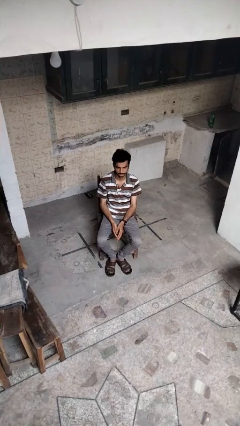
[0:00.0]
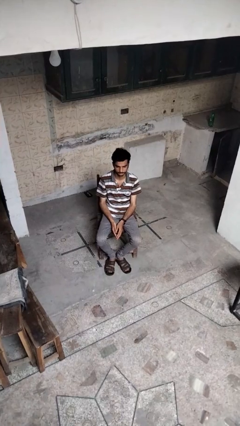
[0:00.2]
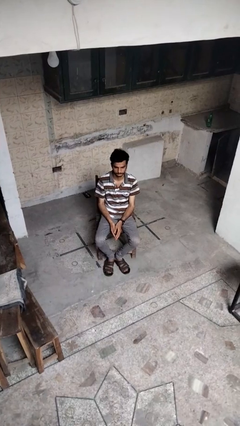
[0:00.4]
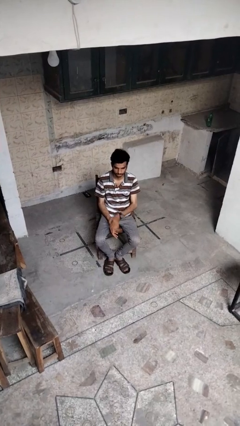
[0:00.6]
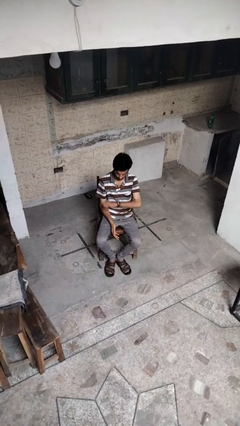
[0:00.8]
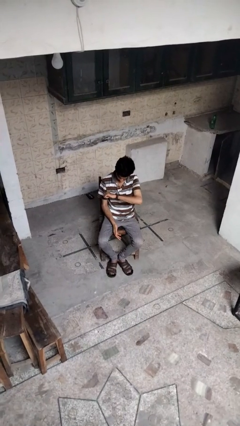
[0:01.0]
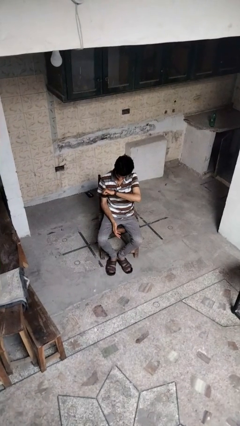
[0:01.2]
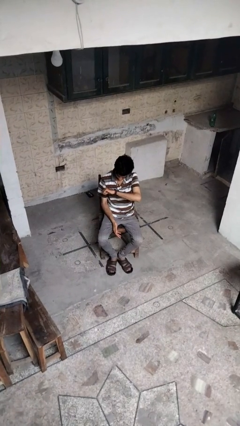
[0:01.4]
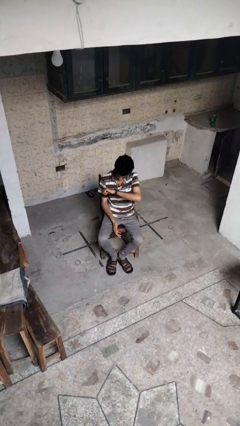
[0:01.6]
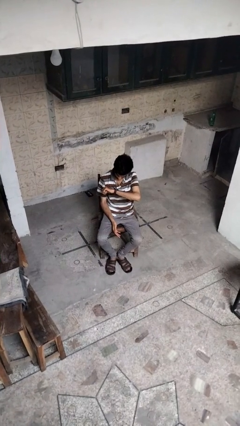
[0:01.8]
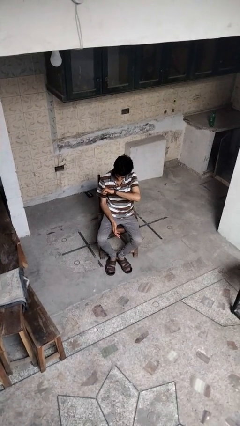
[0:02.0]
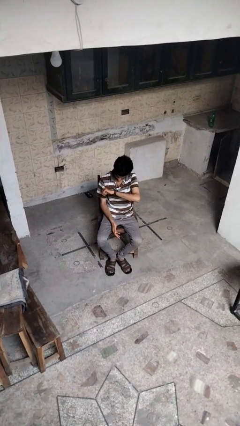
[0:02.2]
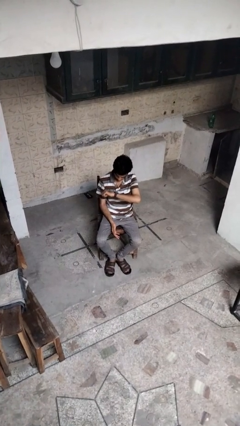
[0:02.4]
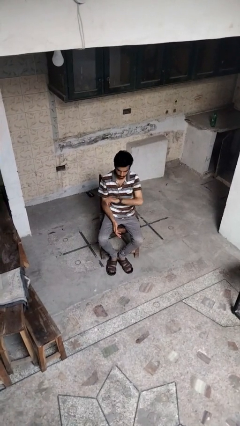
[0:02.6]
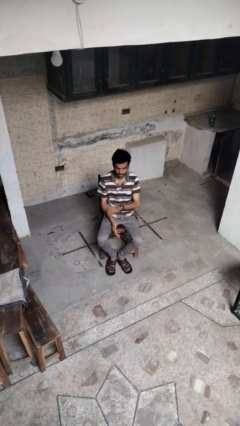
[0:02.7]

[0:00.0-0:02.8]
person looks at wristwatch

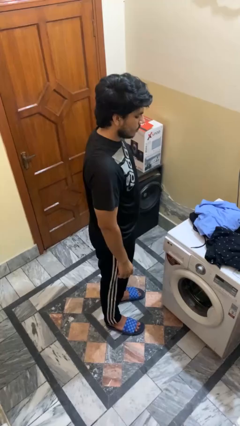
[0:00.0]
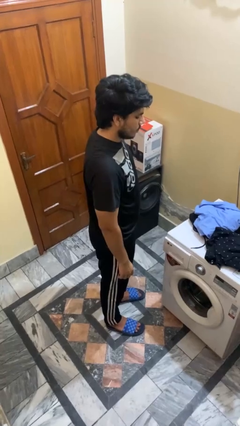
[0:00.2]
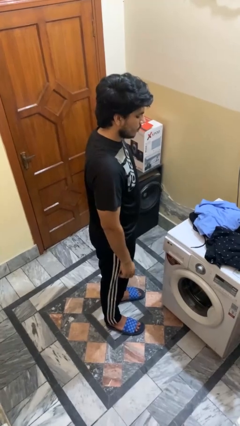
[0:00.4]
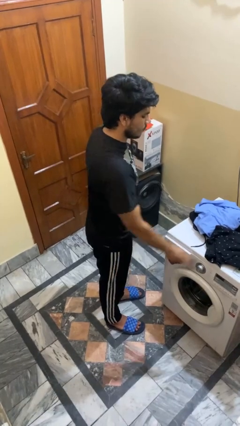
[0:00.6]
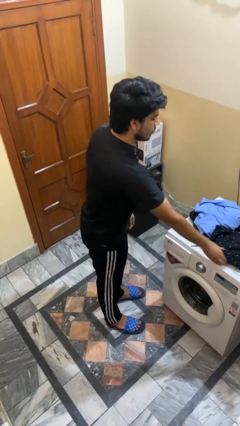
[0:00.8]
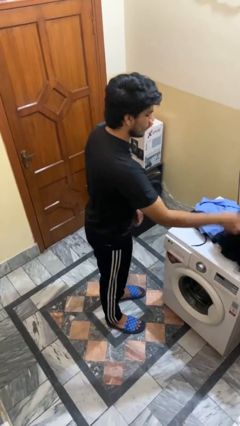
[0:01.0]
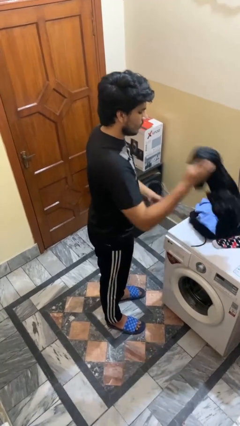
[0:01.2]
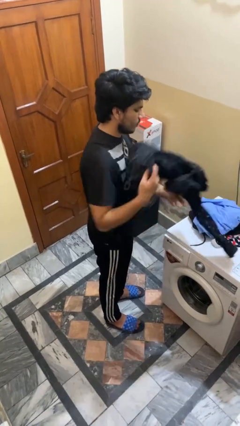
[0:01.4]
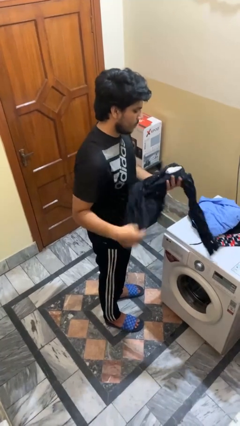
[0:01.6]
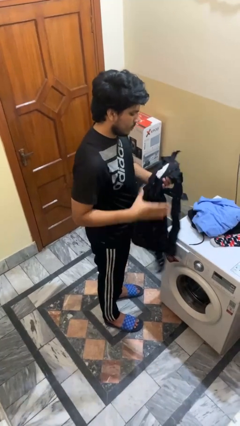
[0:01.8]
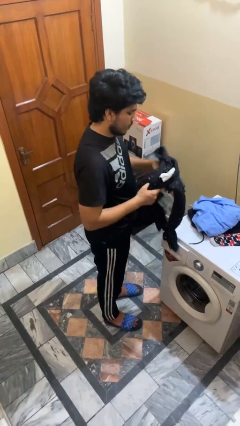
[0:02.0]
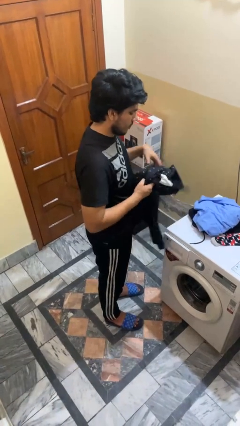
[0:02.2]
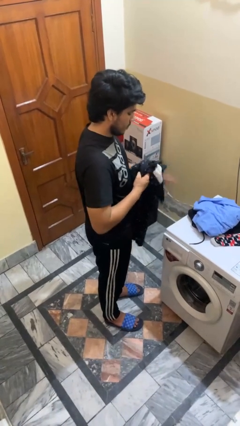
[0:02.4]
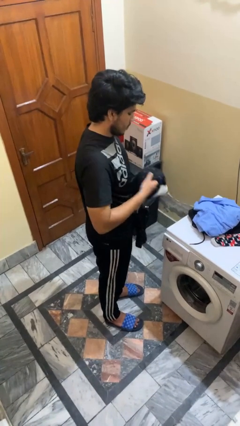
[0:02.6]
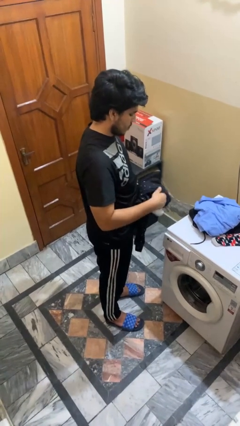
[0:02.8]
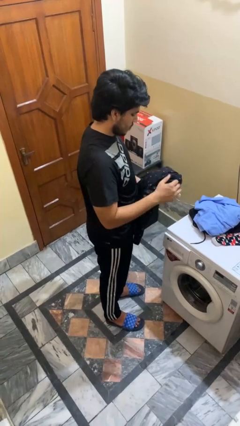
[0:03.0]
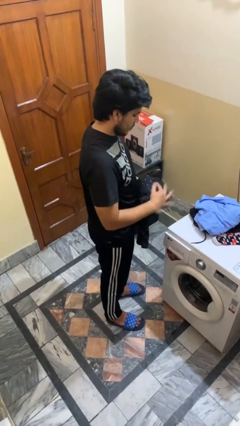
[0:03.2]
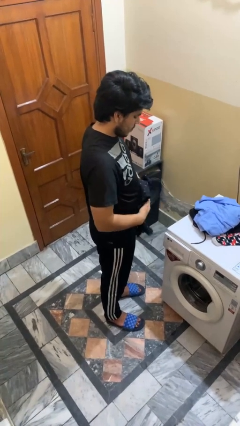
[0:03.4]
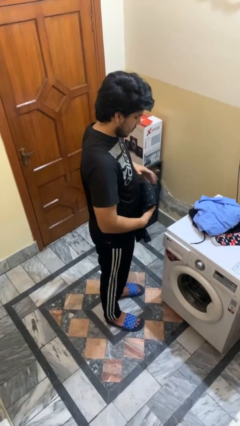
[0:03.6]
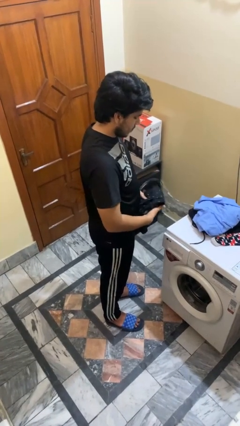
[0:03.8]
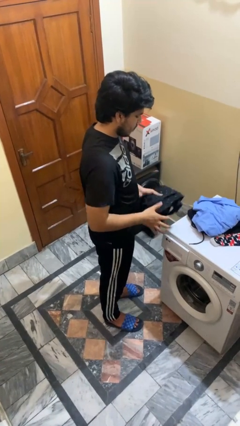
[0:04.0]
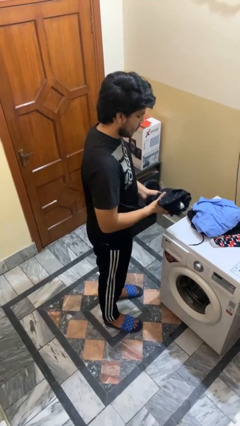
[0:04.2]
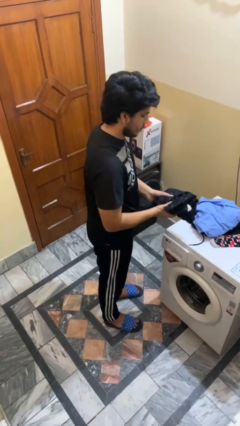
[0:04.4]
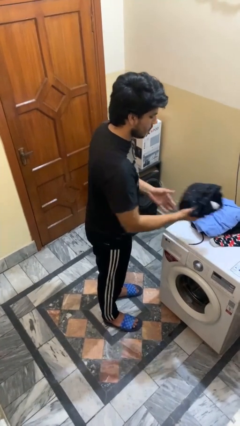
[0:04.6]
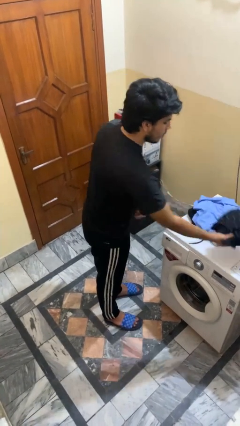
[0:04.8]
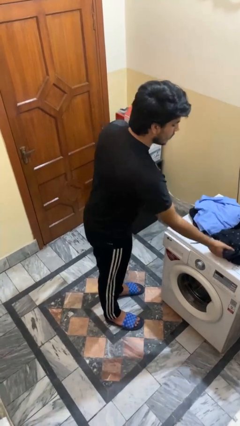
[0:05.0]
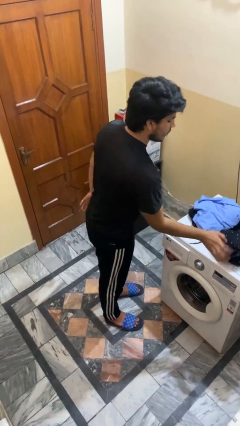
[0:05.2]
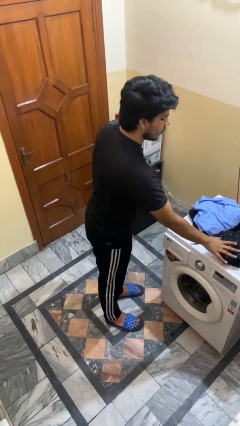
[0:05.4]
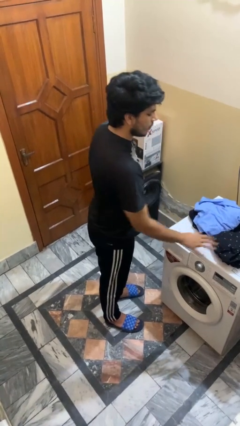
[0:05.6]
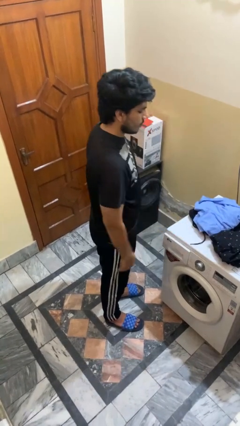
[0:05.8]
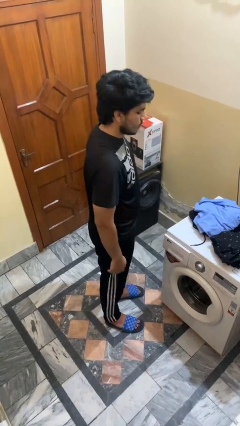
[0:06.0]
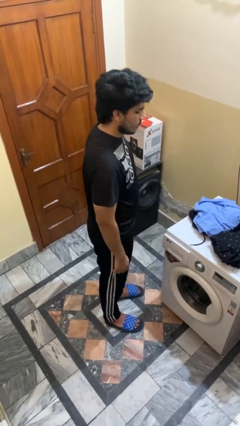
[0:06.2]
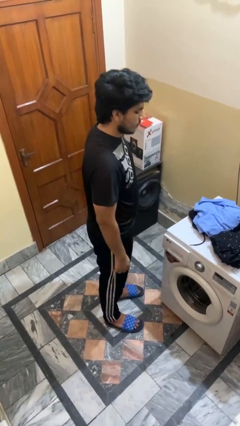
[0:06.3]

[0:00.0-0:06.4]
person folds shirt

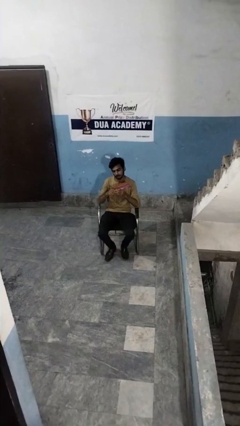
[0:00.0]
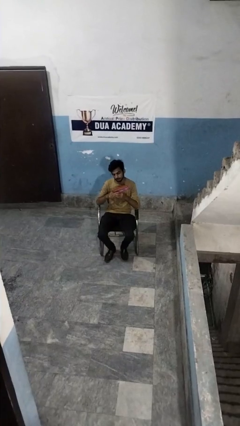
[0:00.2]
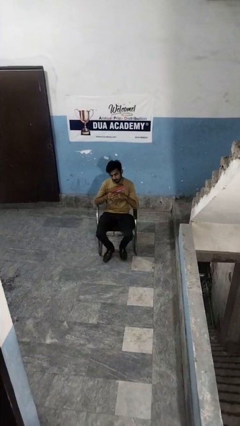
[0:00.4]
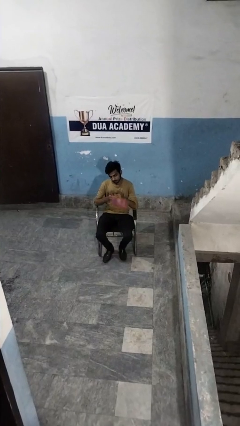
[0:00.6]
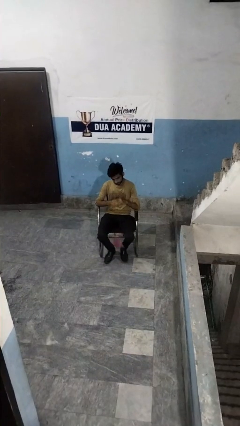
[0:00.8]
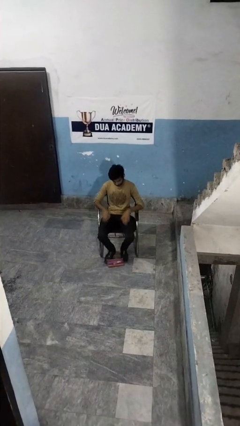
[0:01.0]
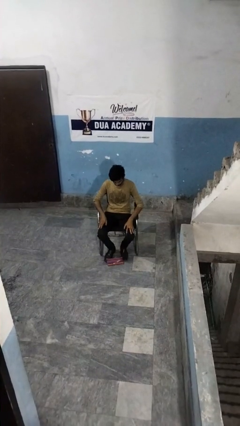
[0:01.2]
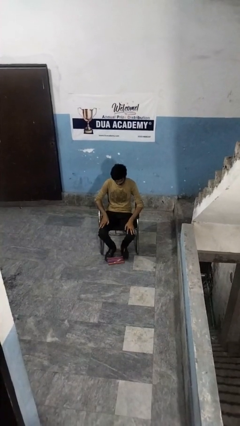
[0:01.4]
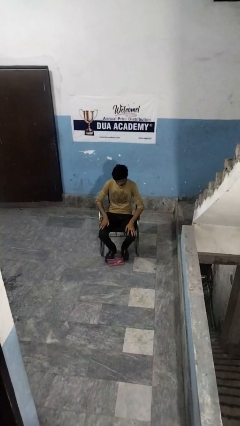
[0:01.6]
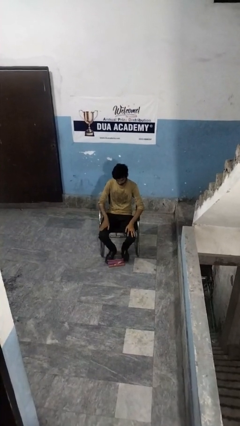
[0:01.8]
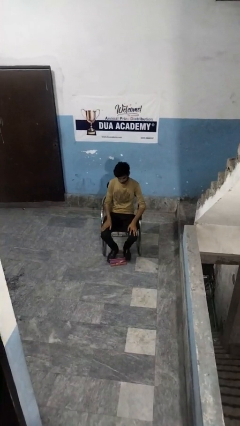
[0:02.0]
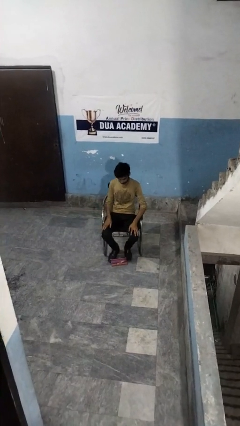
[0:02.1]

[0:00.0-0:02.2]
person drops object

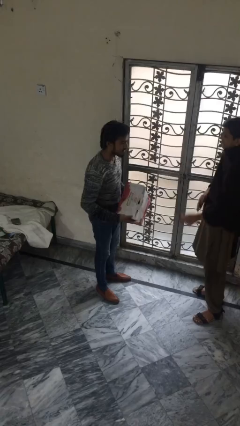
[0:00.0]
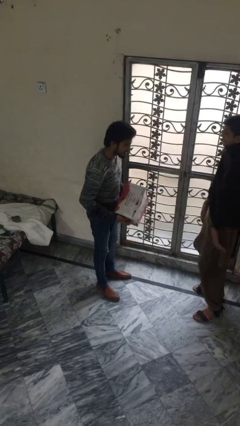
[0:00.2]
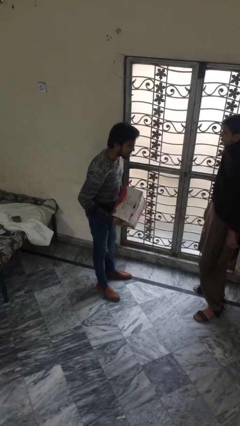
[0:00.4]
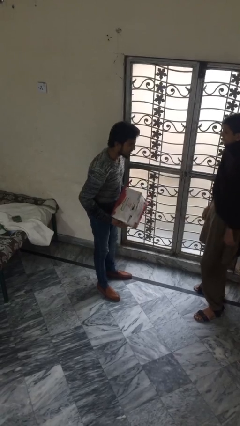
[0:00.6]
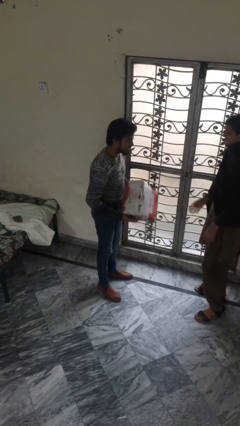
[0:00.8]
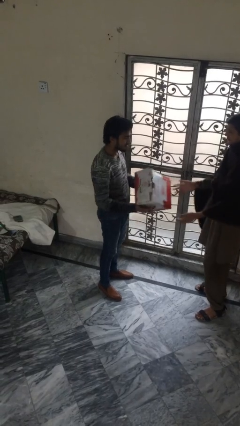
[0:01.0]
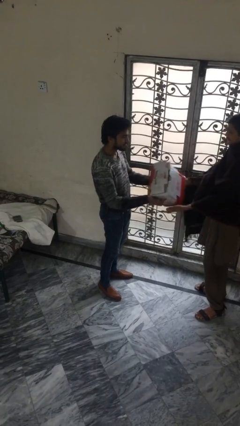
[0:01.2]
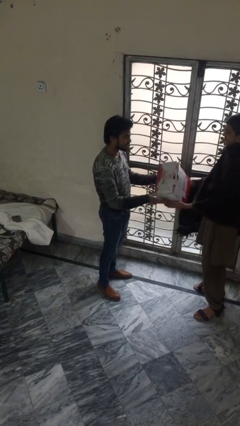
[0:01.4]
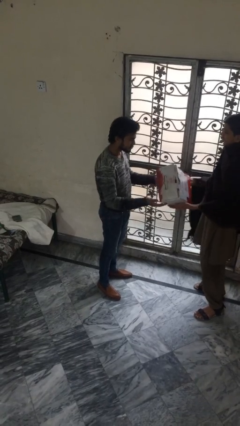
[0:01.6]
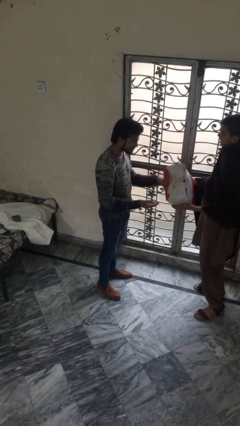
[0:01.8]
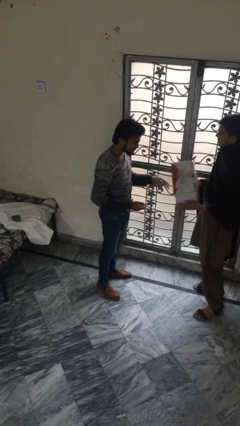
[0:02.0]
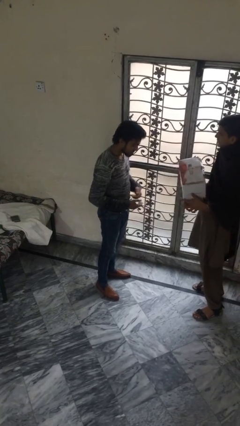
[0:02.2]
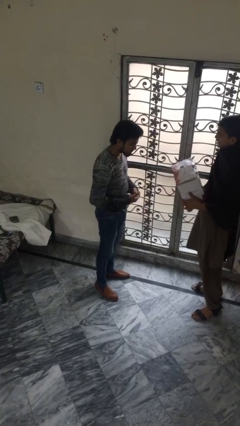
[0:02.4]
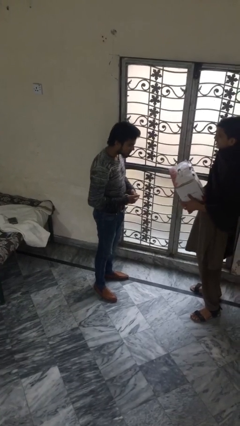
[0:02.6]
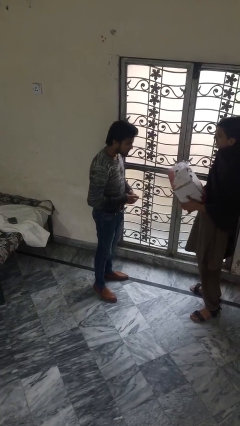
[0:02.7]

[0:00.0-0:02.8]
person transfers object to person

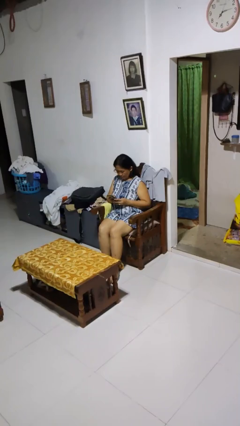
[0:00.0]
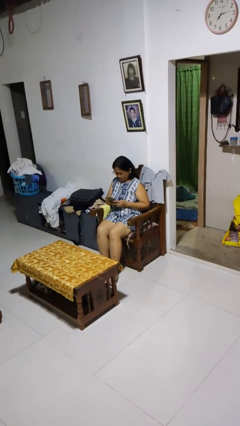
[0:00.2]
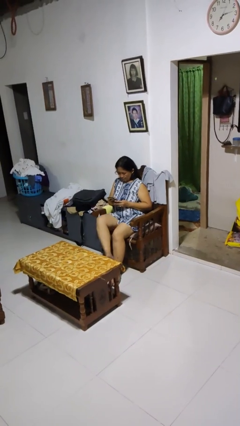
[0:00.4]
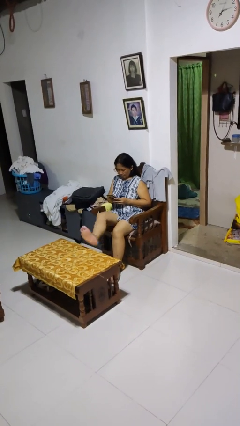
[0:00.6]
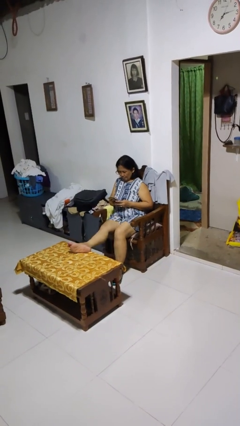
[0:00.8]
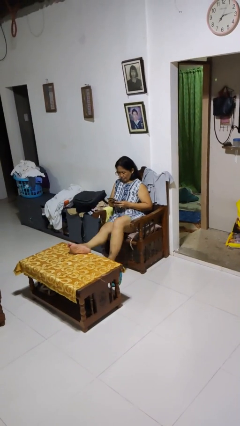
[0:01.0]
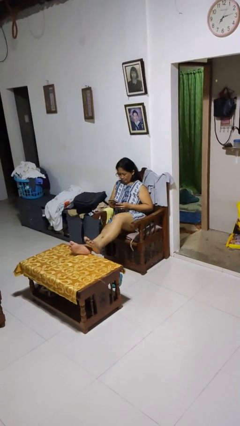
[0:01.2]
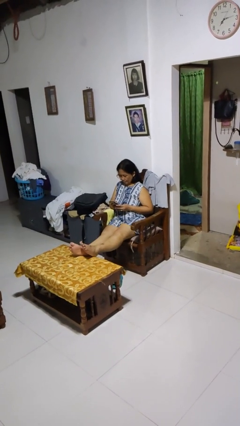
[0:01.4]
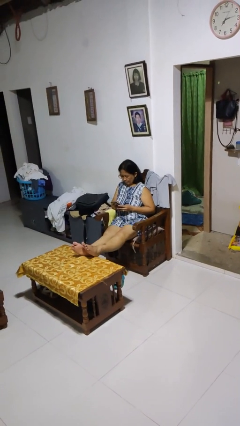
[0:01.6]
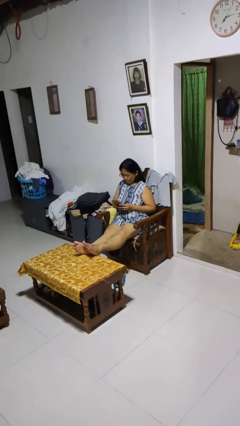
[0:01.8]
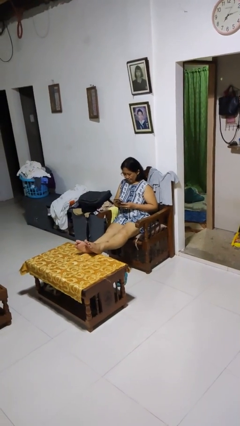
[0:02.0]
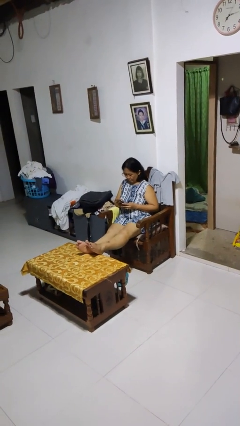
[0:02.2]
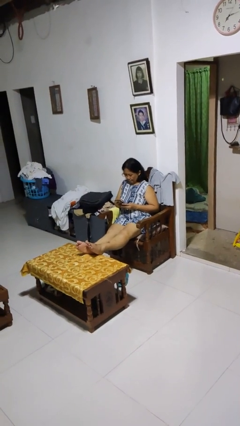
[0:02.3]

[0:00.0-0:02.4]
person puts feet up

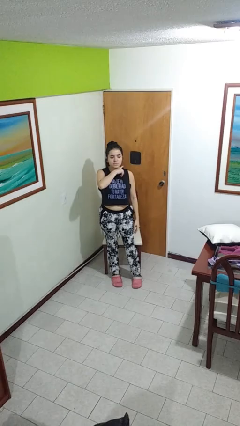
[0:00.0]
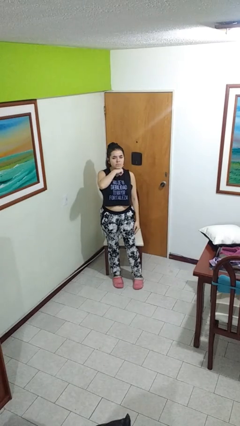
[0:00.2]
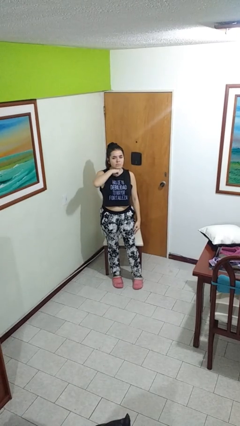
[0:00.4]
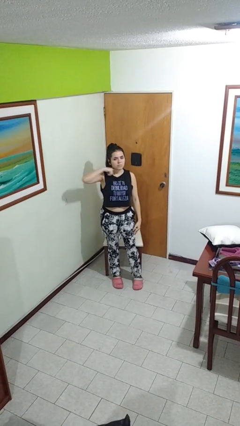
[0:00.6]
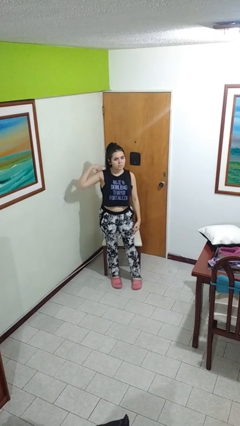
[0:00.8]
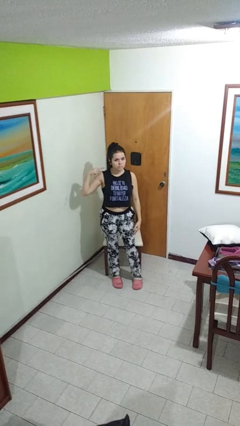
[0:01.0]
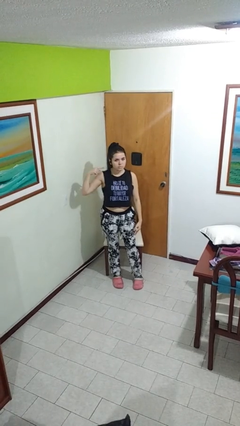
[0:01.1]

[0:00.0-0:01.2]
person gestures cut
